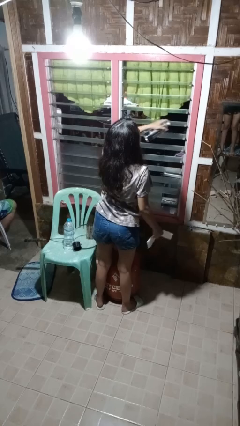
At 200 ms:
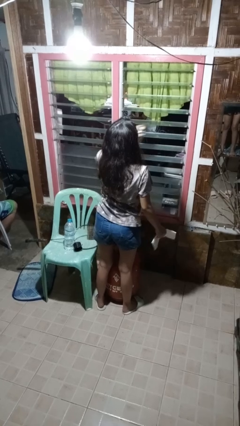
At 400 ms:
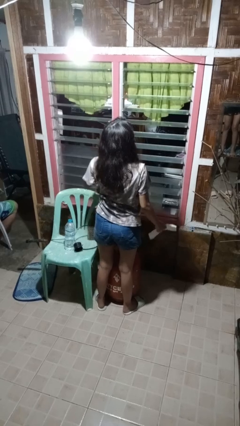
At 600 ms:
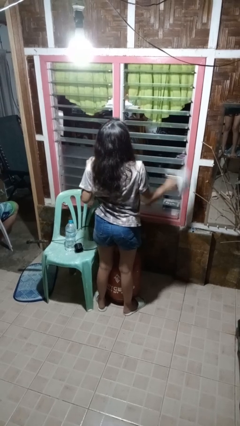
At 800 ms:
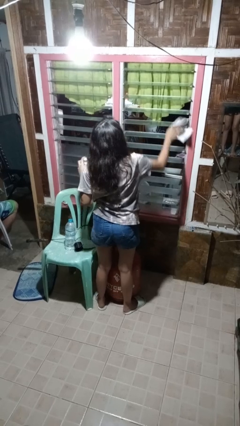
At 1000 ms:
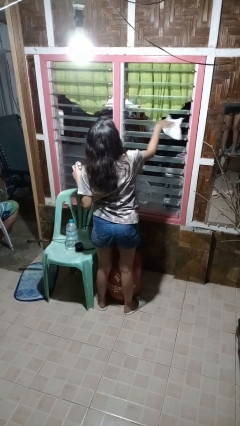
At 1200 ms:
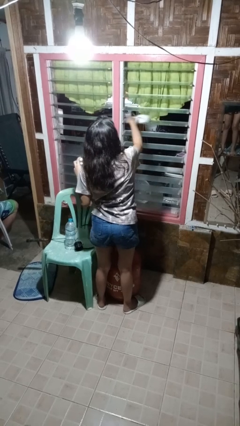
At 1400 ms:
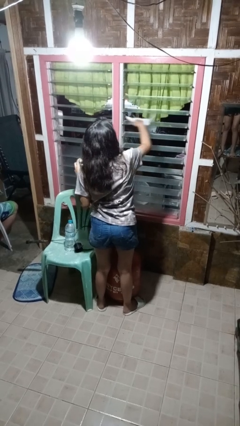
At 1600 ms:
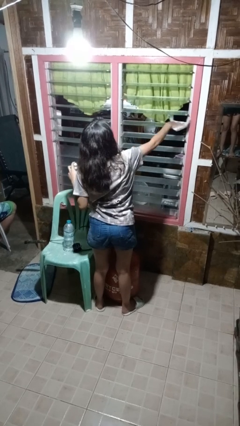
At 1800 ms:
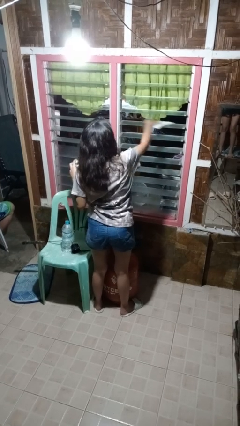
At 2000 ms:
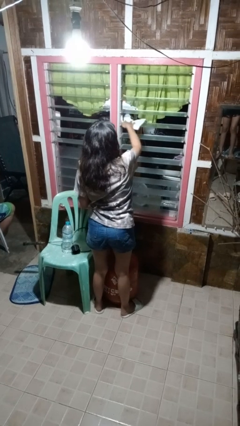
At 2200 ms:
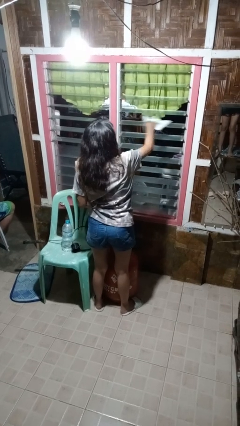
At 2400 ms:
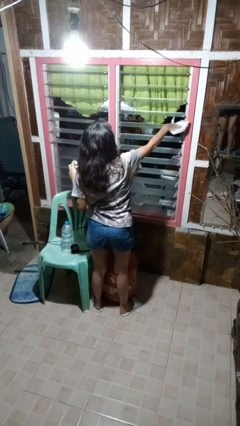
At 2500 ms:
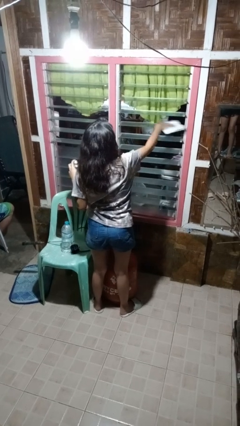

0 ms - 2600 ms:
person washes window

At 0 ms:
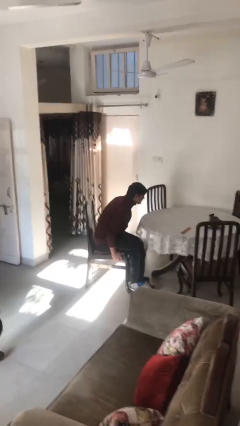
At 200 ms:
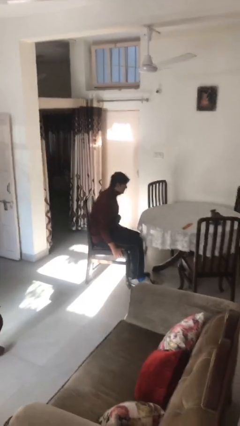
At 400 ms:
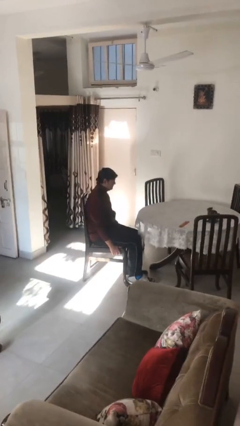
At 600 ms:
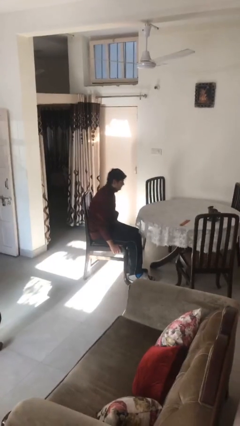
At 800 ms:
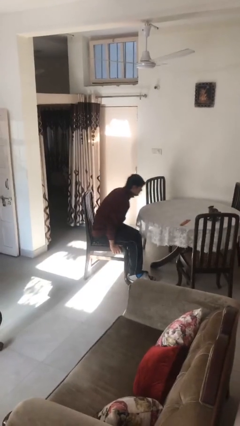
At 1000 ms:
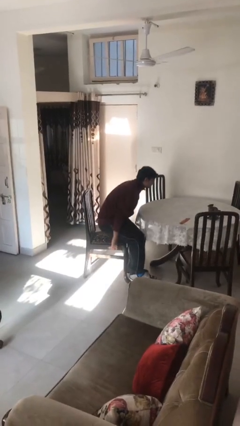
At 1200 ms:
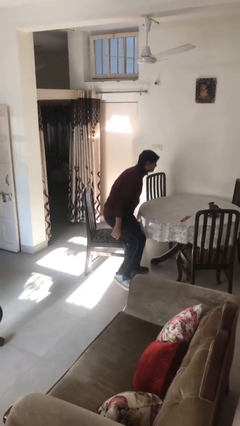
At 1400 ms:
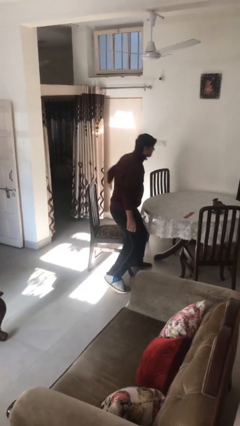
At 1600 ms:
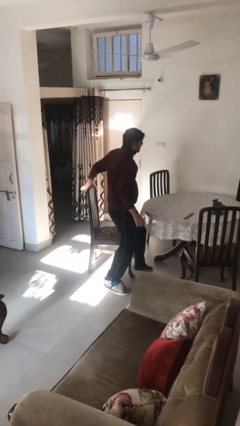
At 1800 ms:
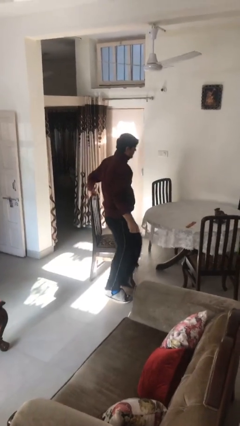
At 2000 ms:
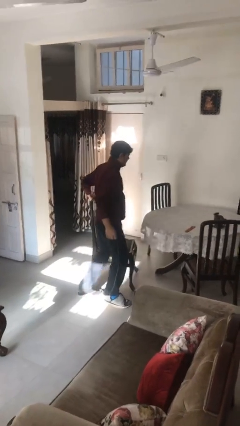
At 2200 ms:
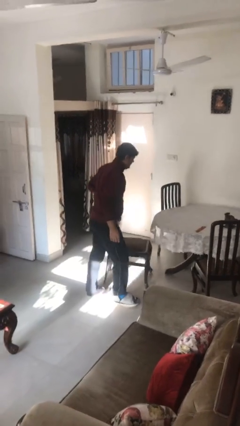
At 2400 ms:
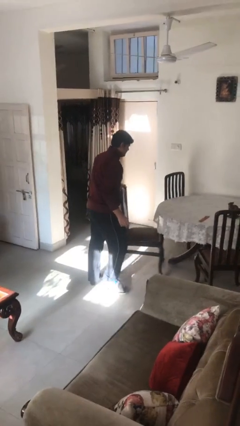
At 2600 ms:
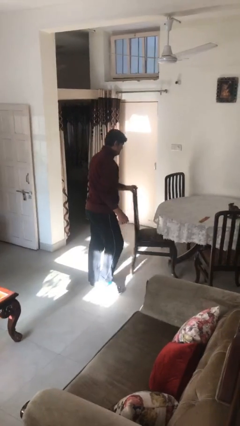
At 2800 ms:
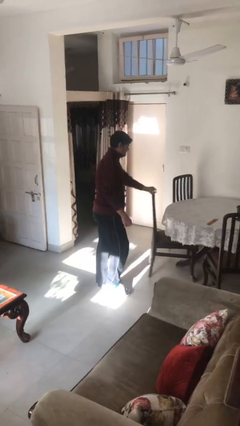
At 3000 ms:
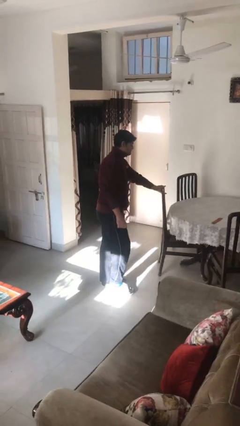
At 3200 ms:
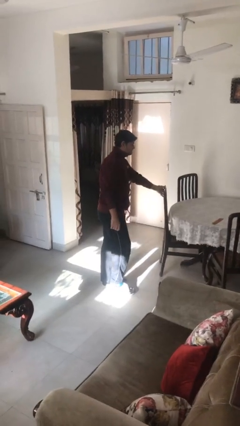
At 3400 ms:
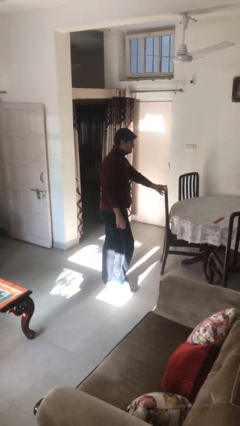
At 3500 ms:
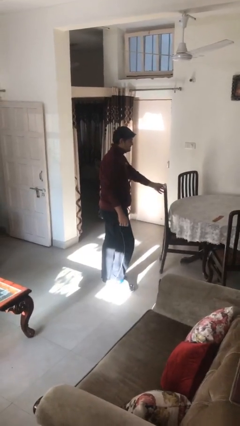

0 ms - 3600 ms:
person stands up

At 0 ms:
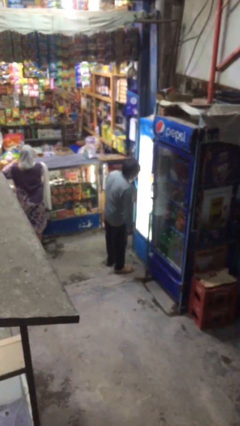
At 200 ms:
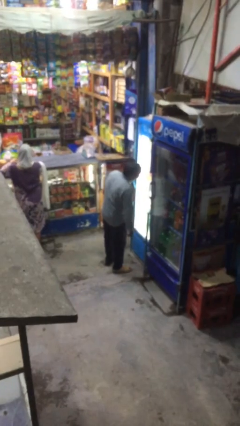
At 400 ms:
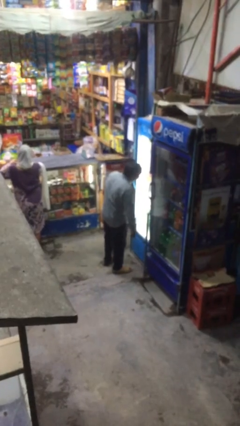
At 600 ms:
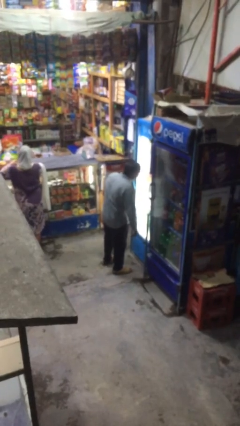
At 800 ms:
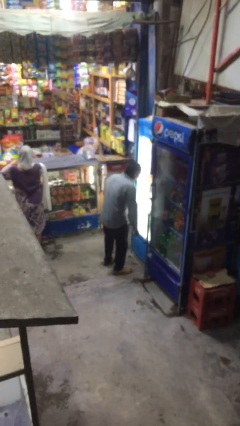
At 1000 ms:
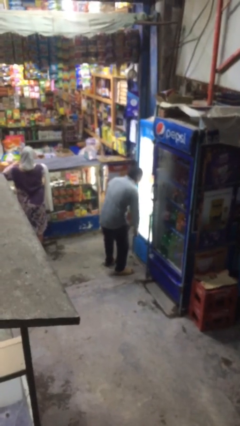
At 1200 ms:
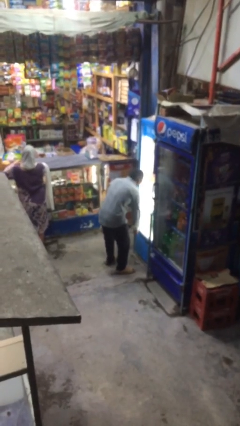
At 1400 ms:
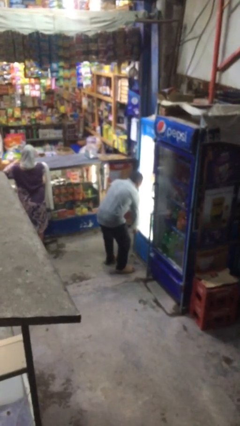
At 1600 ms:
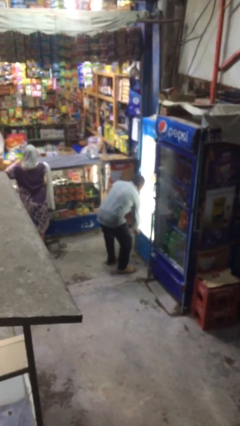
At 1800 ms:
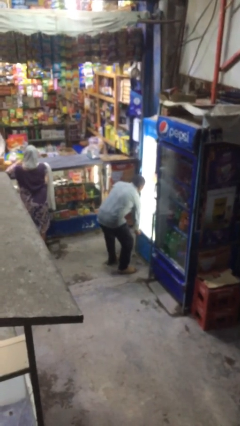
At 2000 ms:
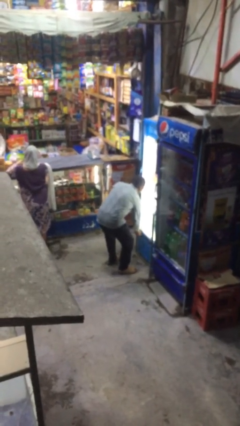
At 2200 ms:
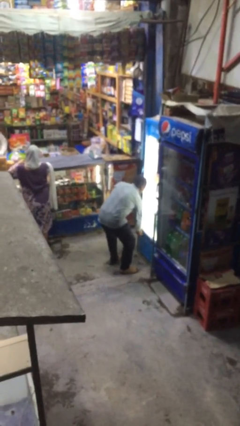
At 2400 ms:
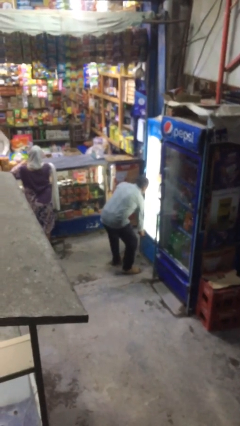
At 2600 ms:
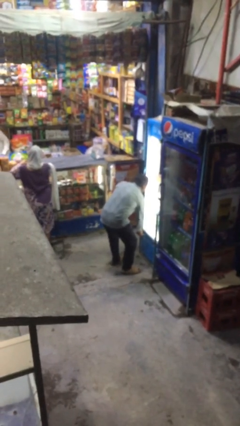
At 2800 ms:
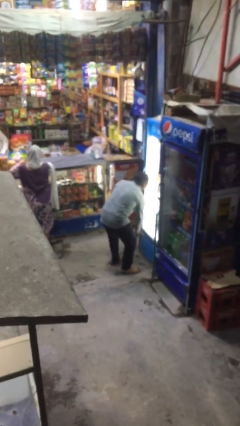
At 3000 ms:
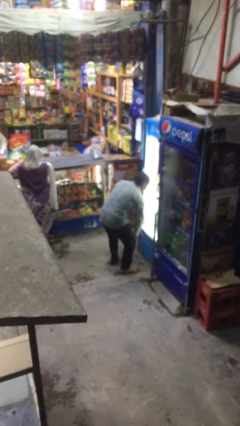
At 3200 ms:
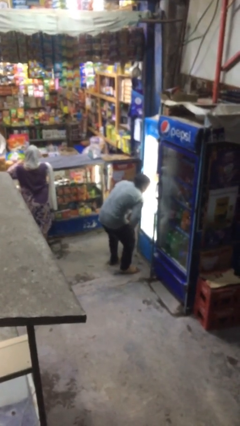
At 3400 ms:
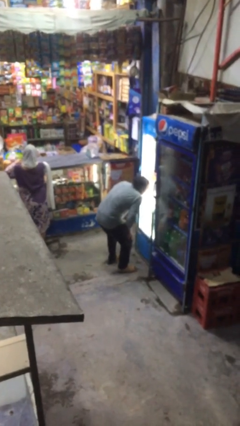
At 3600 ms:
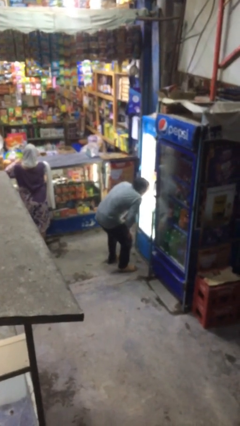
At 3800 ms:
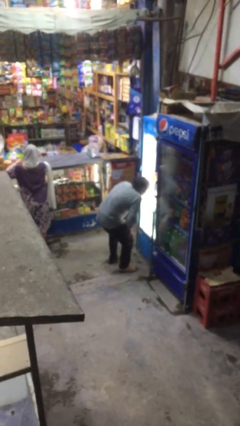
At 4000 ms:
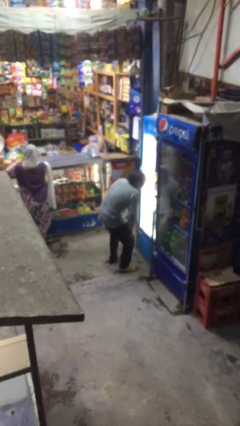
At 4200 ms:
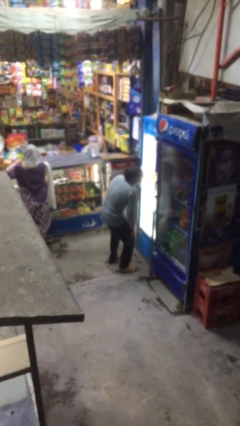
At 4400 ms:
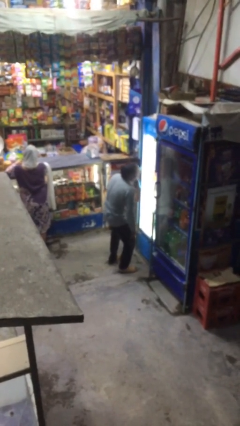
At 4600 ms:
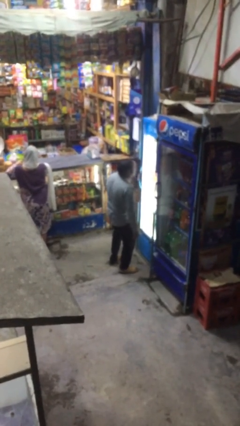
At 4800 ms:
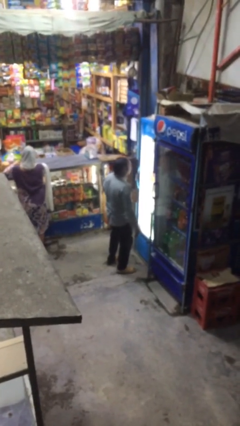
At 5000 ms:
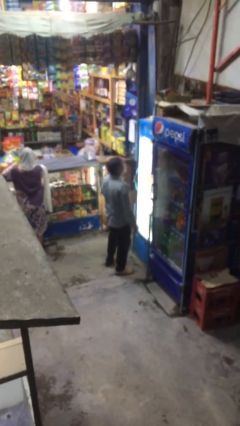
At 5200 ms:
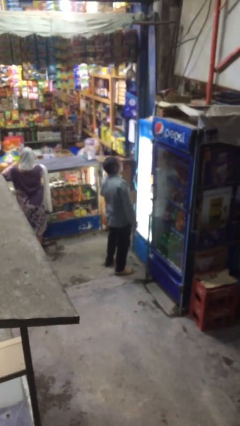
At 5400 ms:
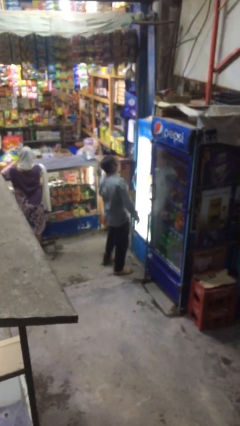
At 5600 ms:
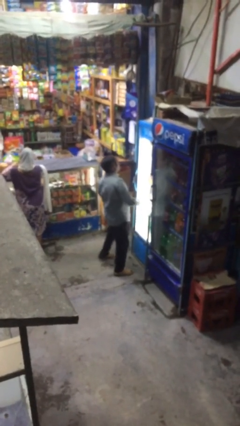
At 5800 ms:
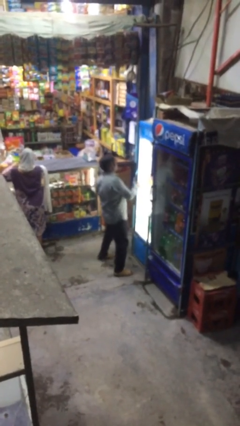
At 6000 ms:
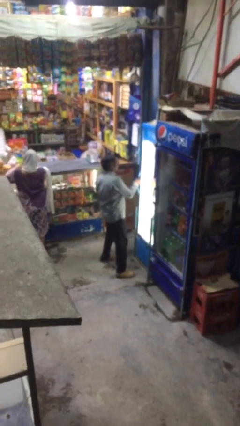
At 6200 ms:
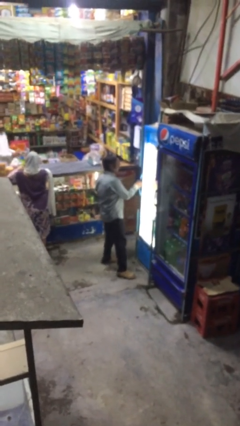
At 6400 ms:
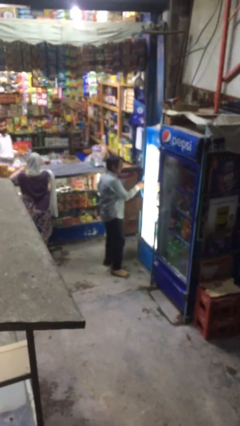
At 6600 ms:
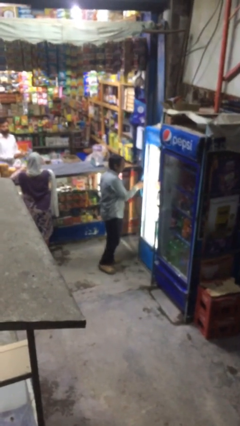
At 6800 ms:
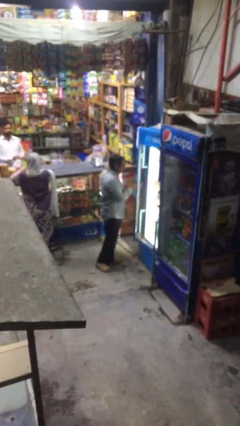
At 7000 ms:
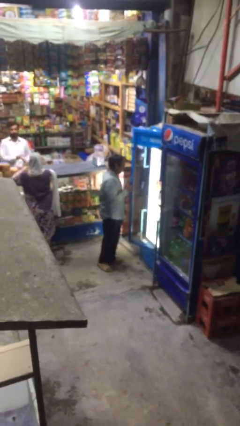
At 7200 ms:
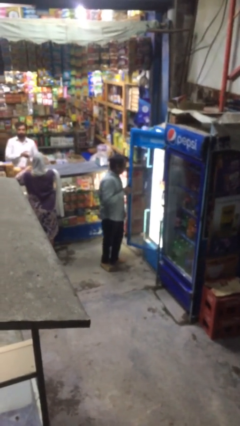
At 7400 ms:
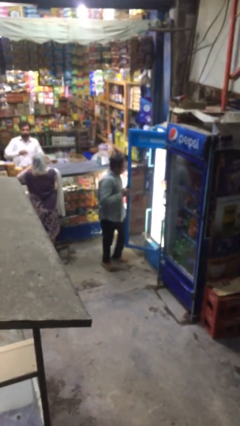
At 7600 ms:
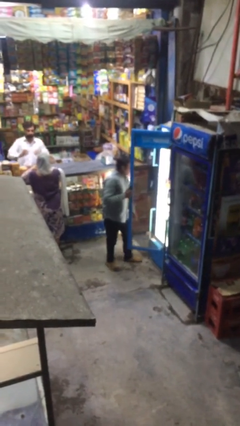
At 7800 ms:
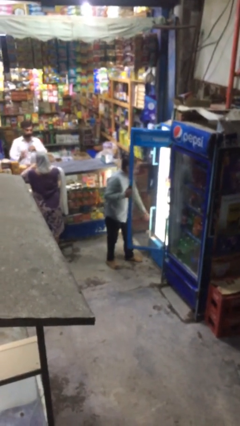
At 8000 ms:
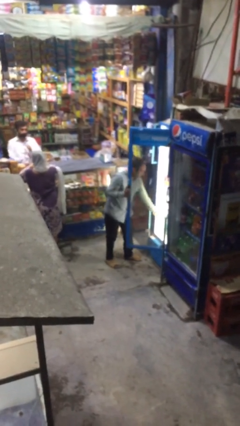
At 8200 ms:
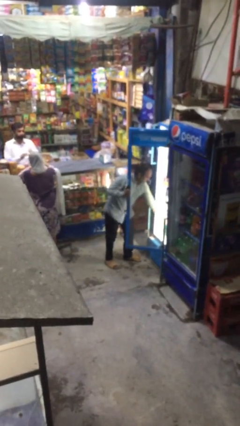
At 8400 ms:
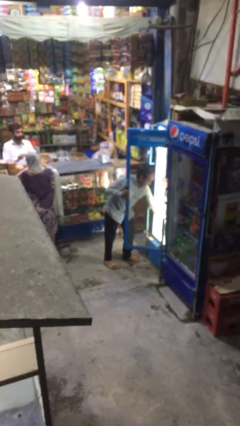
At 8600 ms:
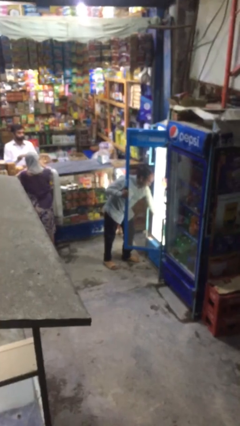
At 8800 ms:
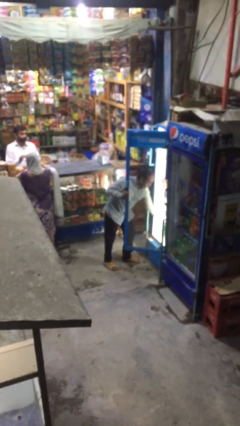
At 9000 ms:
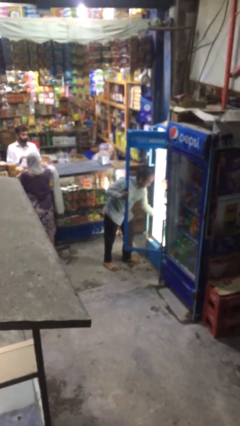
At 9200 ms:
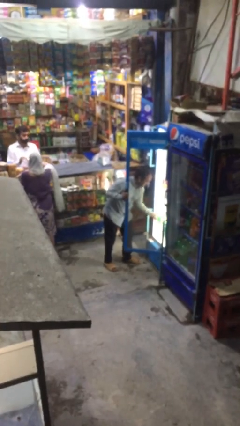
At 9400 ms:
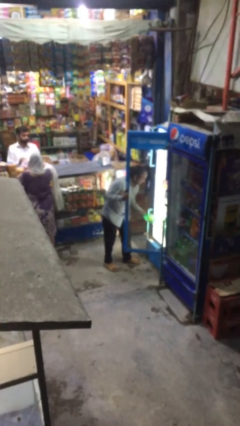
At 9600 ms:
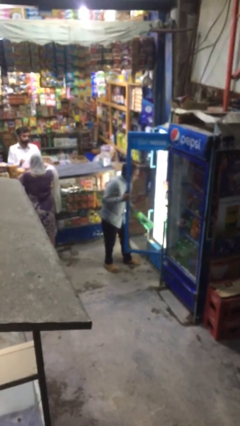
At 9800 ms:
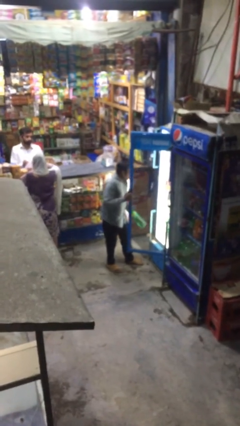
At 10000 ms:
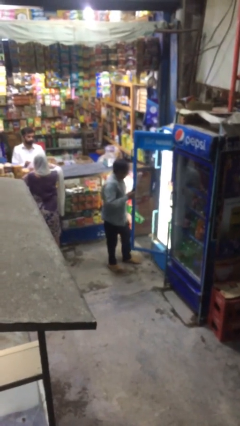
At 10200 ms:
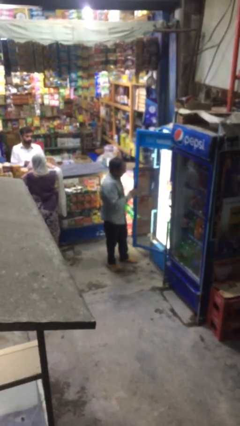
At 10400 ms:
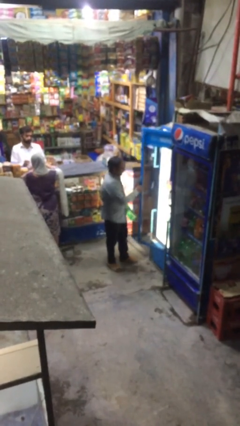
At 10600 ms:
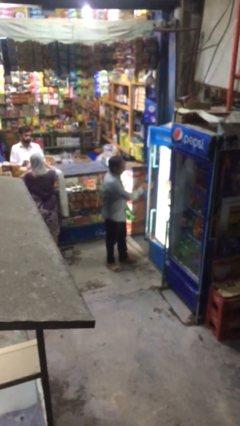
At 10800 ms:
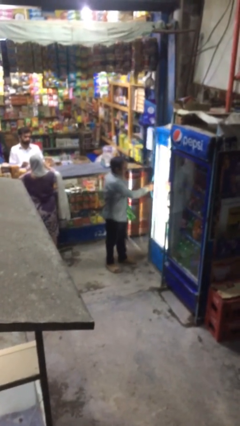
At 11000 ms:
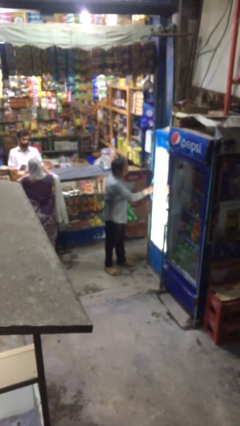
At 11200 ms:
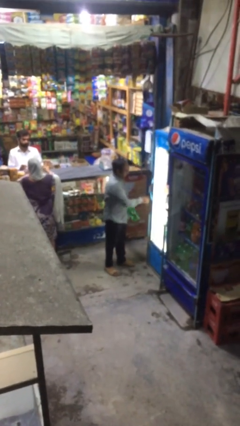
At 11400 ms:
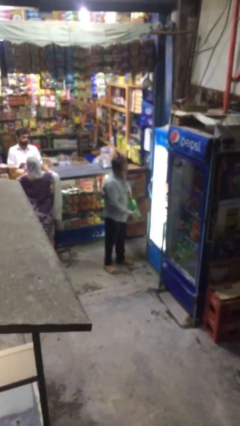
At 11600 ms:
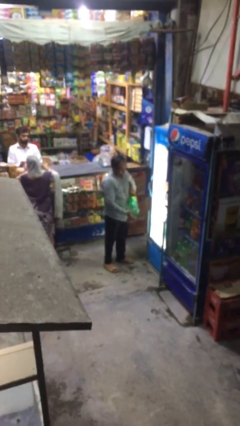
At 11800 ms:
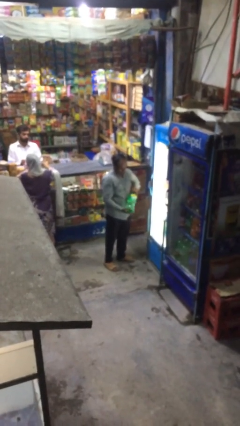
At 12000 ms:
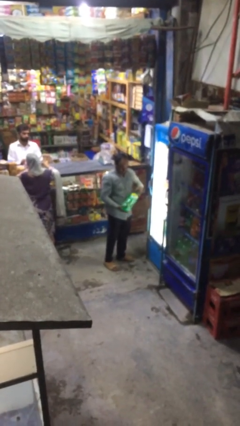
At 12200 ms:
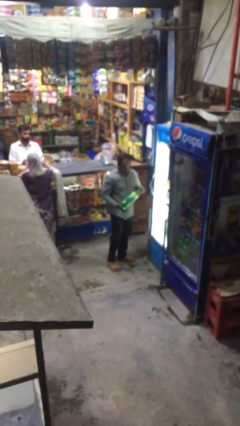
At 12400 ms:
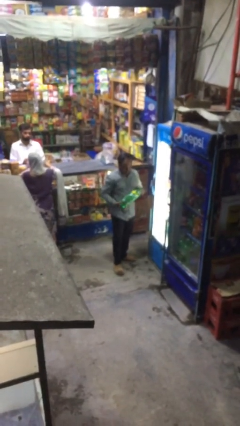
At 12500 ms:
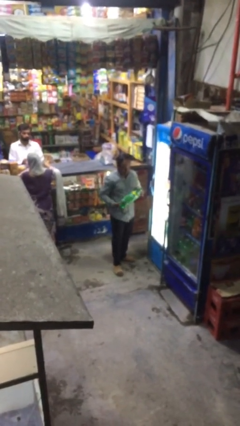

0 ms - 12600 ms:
person purchases from machine
